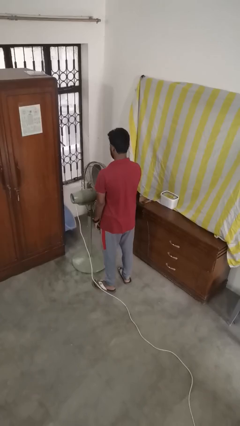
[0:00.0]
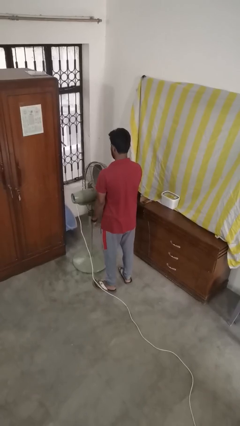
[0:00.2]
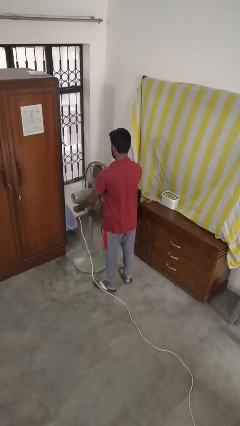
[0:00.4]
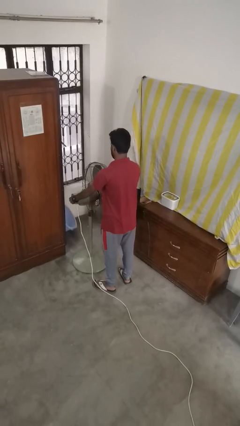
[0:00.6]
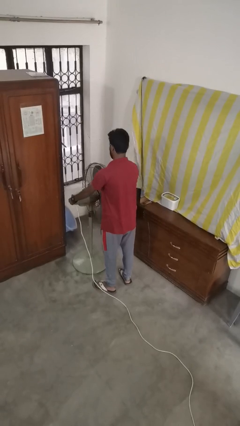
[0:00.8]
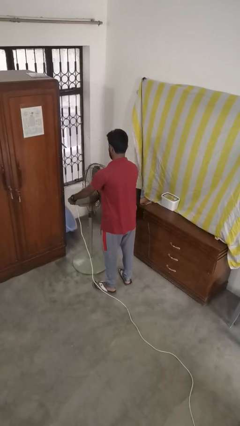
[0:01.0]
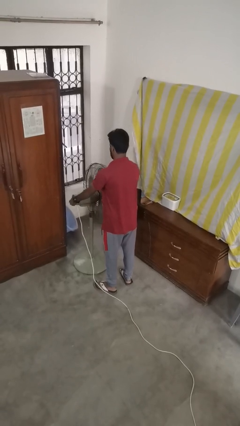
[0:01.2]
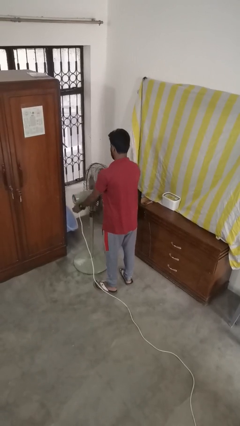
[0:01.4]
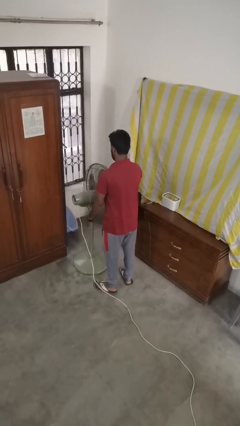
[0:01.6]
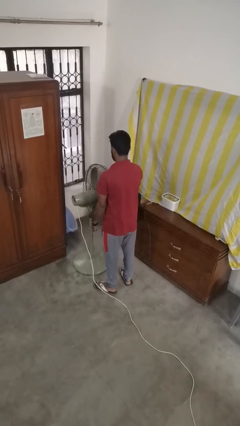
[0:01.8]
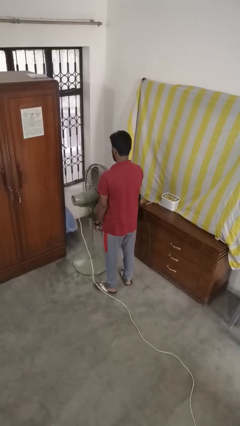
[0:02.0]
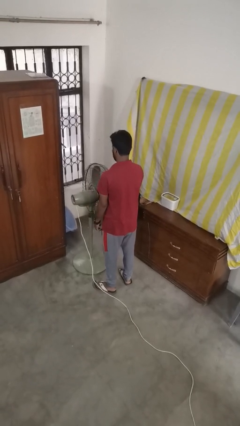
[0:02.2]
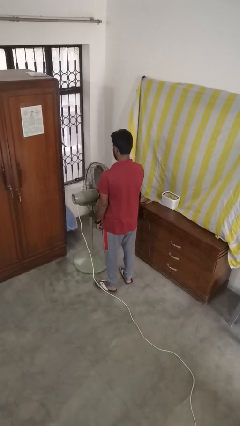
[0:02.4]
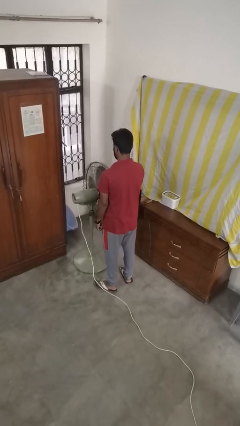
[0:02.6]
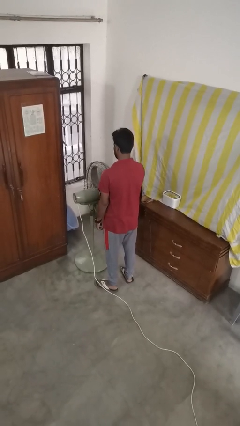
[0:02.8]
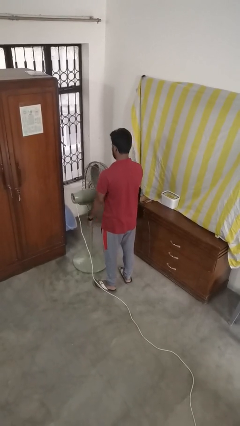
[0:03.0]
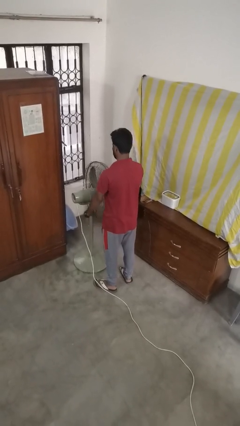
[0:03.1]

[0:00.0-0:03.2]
person turns on fan

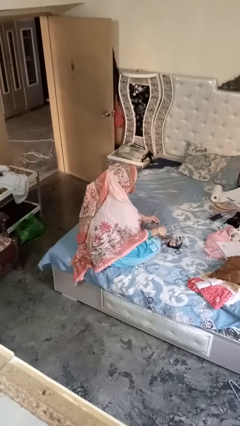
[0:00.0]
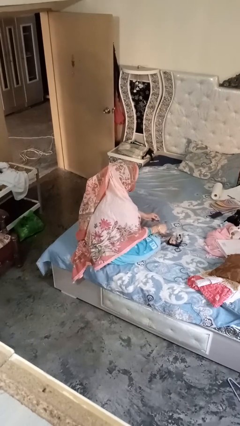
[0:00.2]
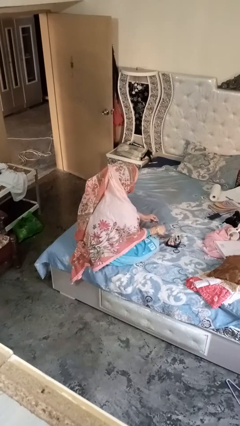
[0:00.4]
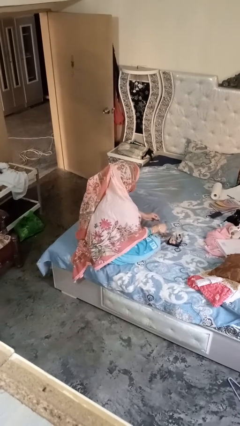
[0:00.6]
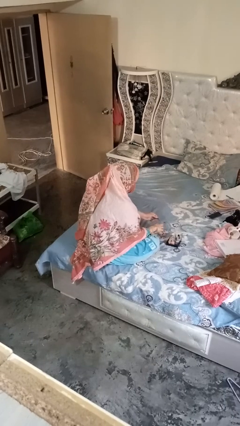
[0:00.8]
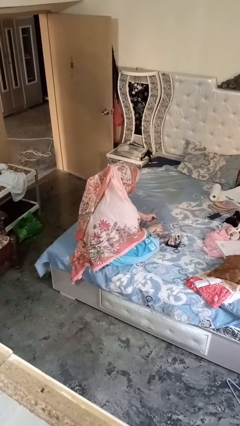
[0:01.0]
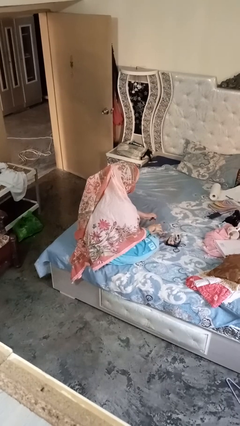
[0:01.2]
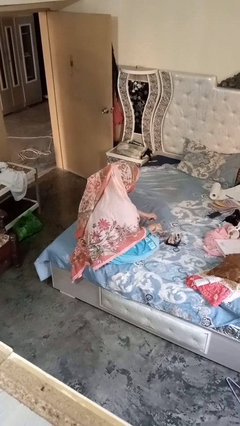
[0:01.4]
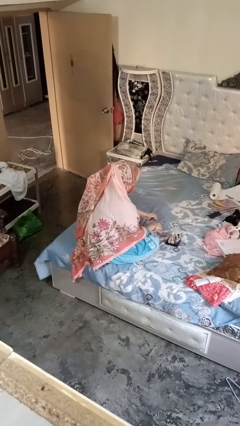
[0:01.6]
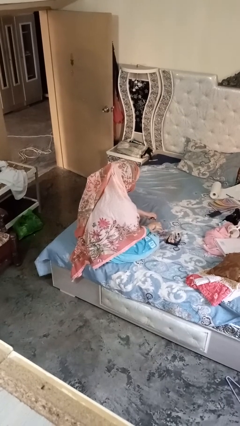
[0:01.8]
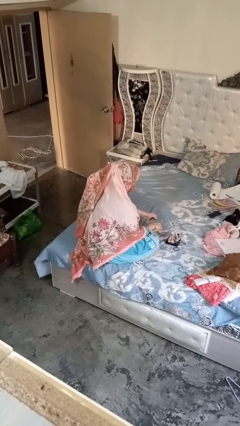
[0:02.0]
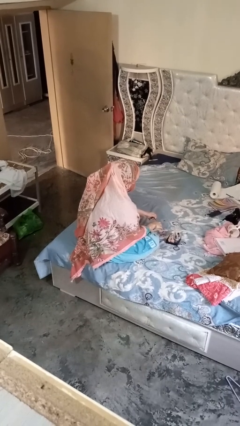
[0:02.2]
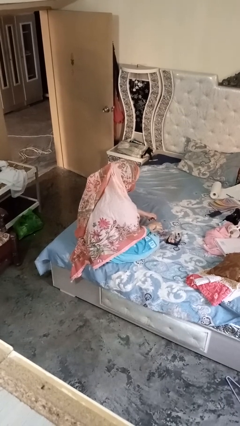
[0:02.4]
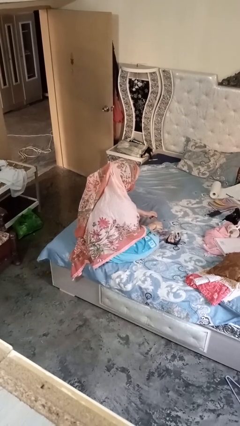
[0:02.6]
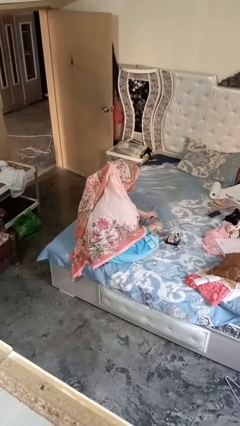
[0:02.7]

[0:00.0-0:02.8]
person paints fingernails

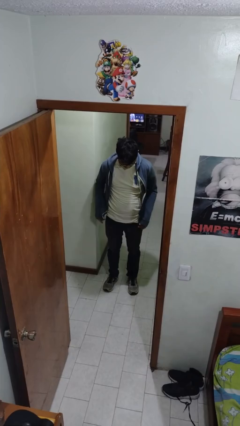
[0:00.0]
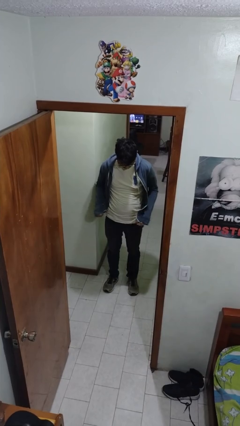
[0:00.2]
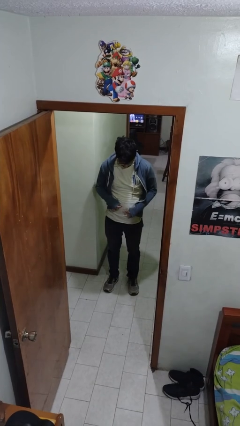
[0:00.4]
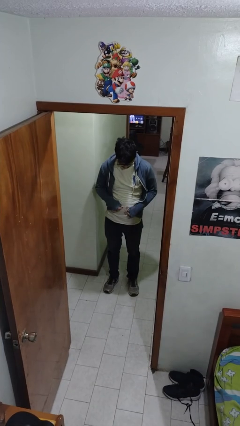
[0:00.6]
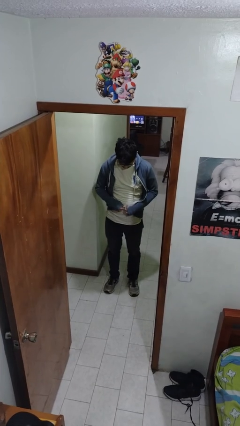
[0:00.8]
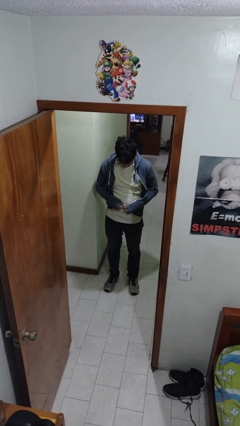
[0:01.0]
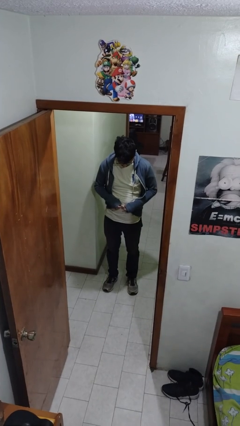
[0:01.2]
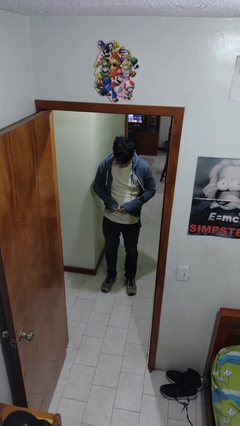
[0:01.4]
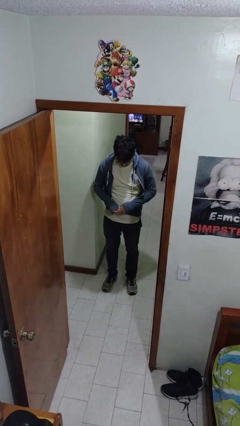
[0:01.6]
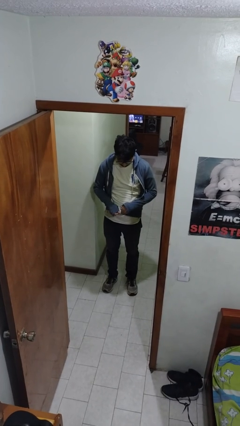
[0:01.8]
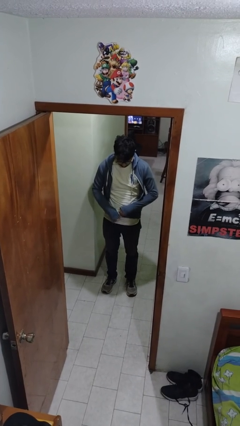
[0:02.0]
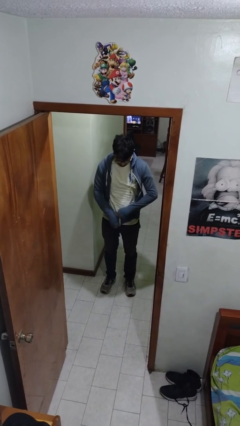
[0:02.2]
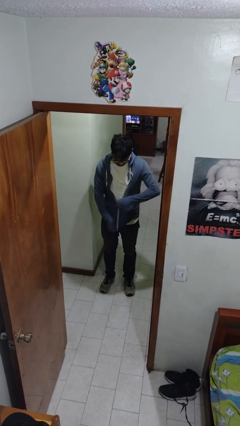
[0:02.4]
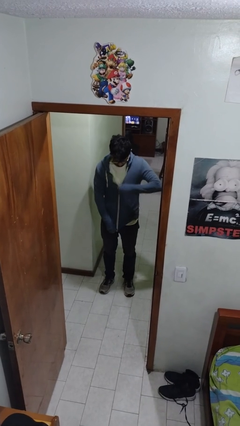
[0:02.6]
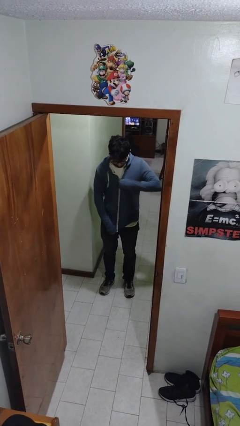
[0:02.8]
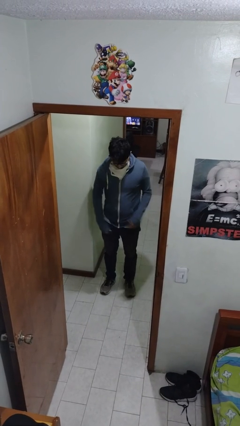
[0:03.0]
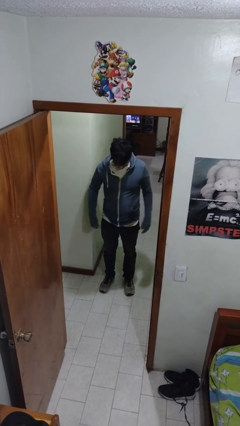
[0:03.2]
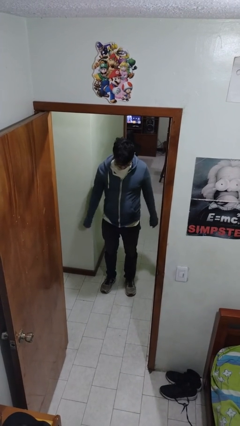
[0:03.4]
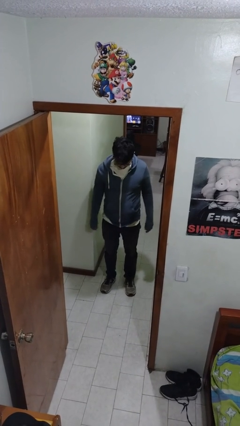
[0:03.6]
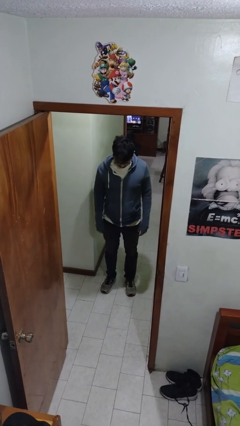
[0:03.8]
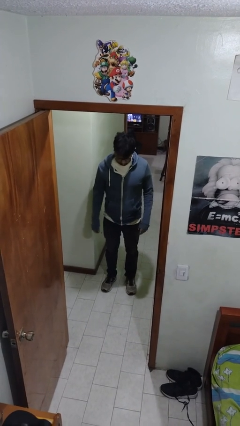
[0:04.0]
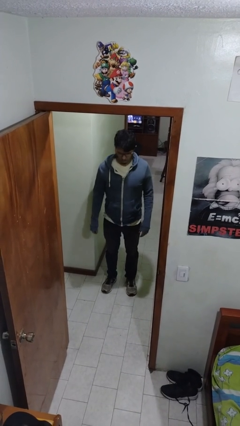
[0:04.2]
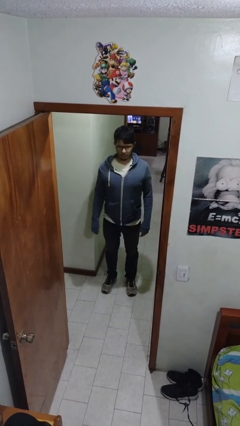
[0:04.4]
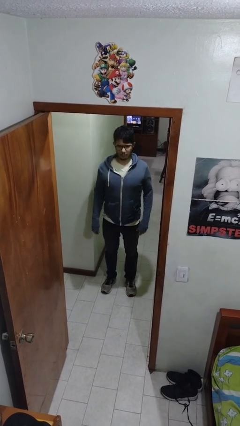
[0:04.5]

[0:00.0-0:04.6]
person zips up jacket

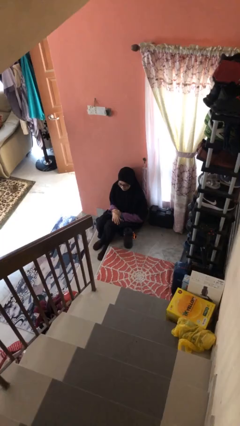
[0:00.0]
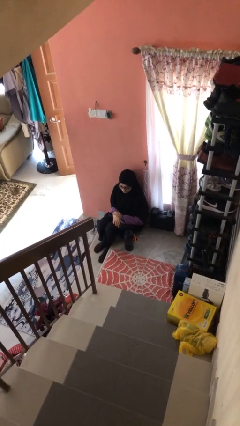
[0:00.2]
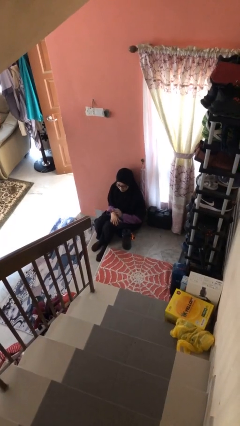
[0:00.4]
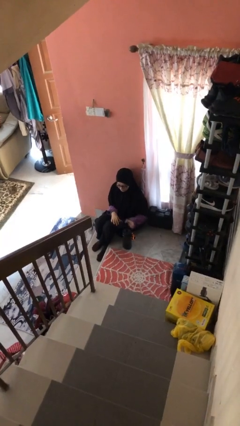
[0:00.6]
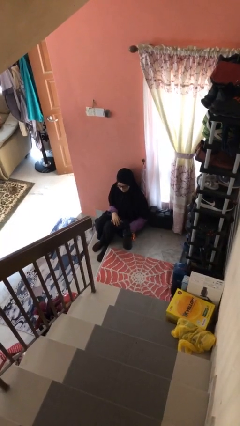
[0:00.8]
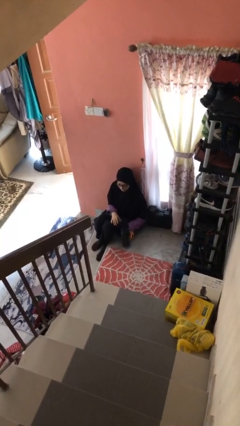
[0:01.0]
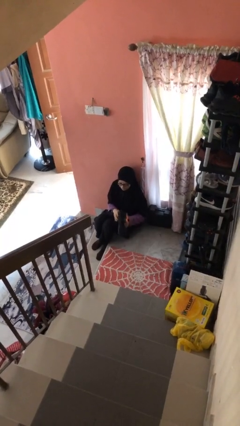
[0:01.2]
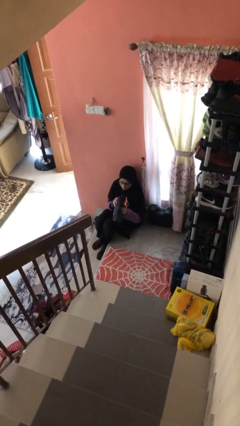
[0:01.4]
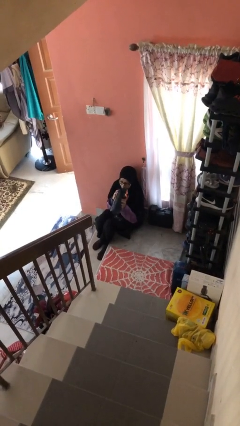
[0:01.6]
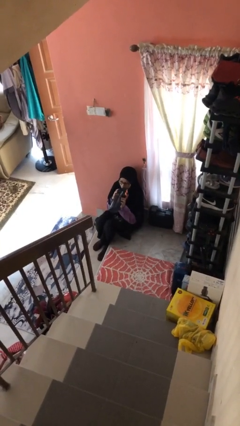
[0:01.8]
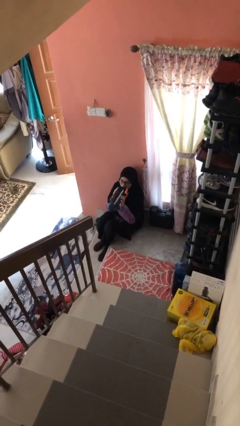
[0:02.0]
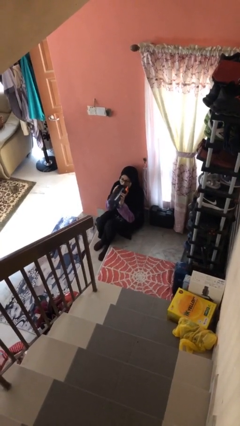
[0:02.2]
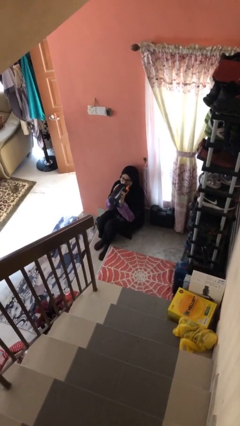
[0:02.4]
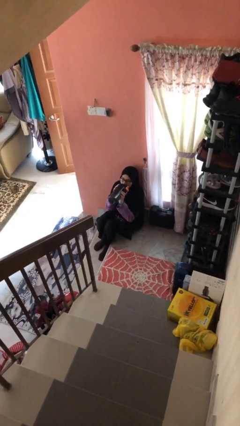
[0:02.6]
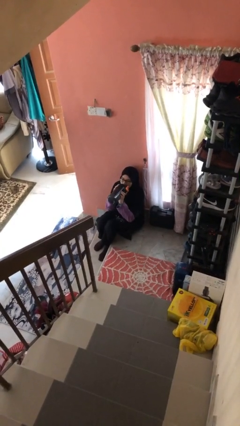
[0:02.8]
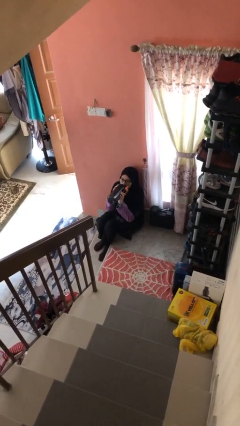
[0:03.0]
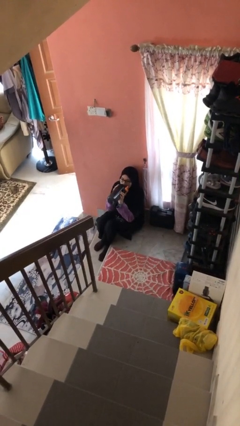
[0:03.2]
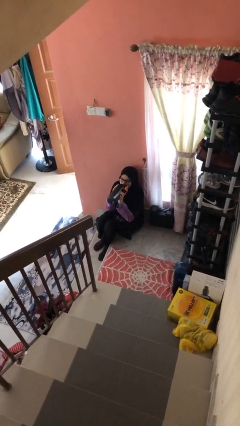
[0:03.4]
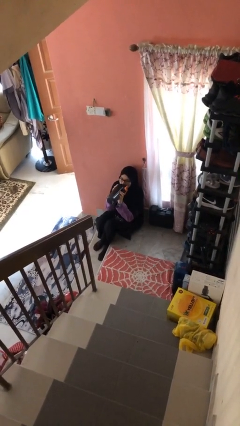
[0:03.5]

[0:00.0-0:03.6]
person drinks from bottle

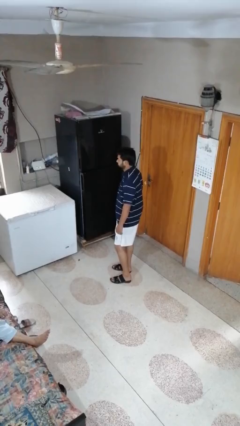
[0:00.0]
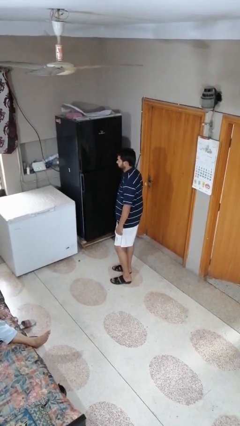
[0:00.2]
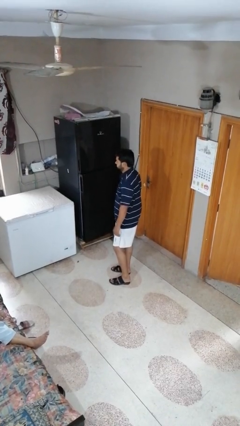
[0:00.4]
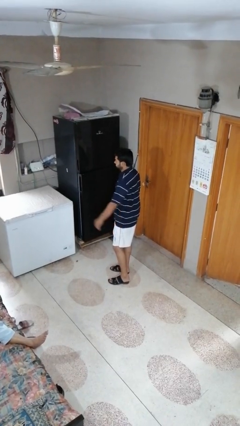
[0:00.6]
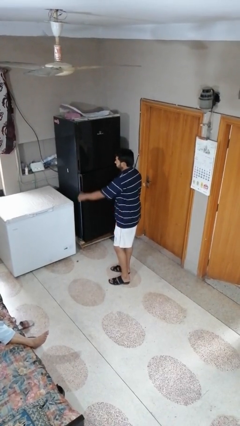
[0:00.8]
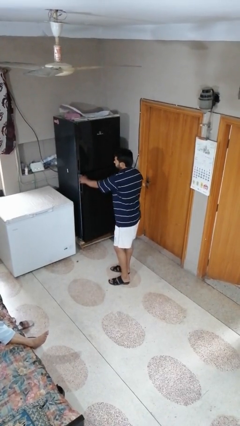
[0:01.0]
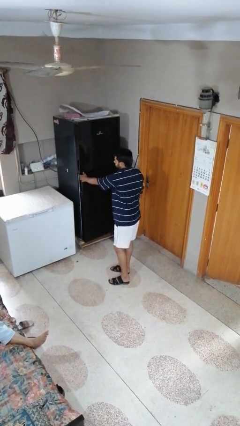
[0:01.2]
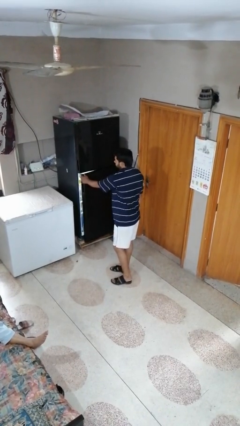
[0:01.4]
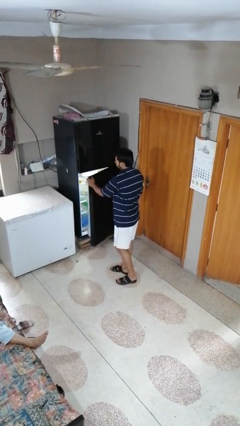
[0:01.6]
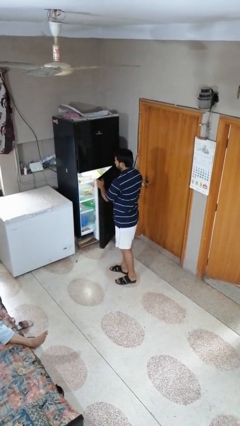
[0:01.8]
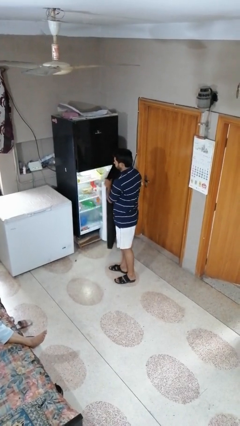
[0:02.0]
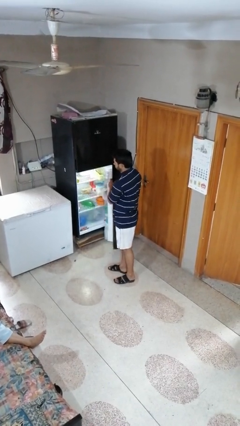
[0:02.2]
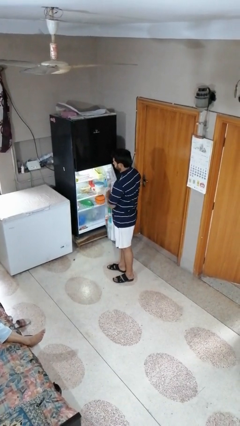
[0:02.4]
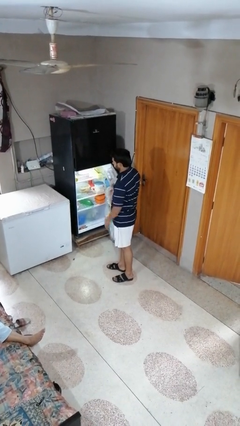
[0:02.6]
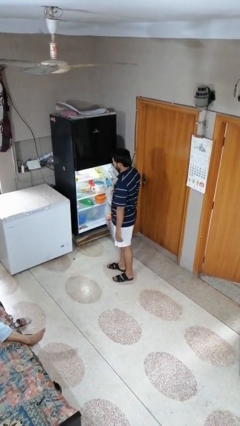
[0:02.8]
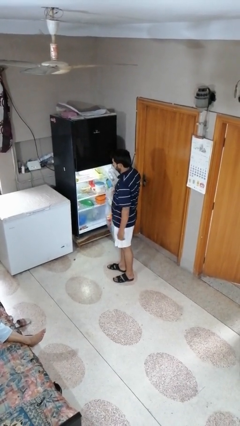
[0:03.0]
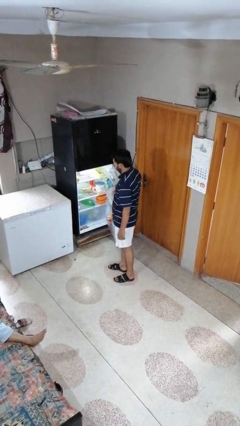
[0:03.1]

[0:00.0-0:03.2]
person opens refrigerator
